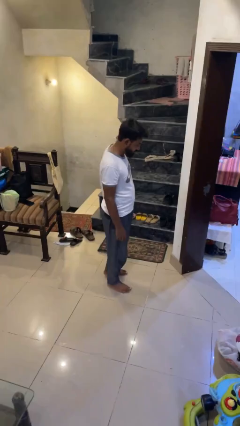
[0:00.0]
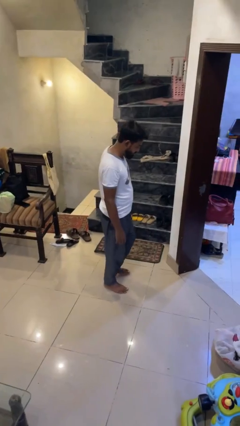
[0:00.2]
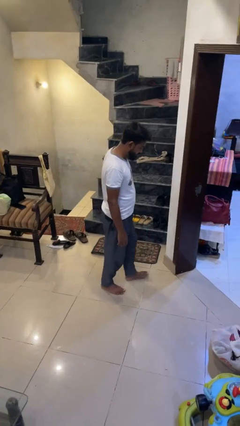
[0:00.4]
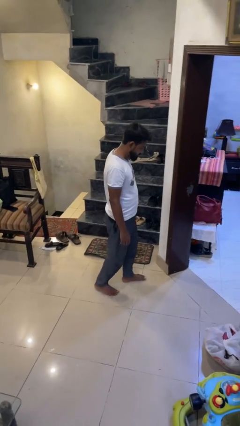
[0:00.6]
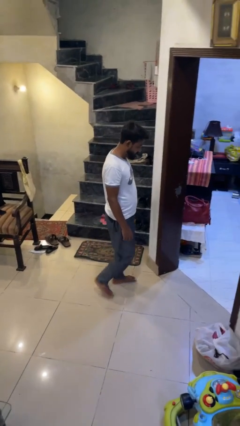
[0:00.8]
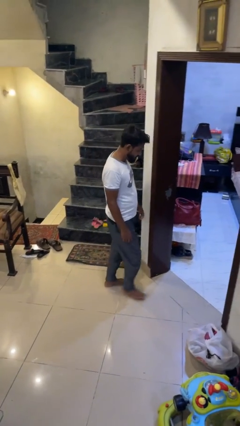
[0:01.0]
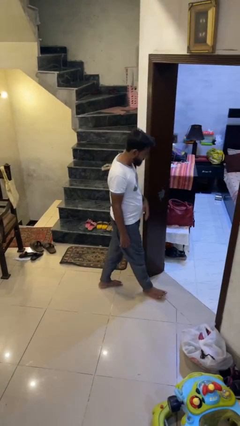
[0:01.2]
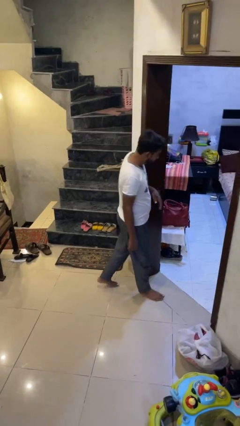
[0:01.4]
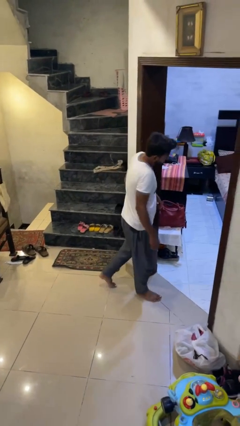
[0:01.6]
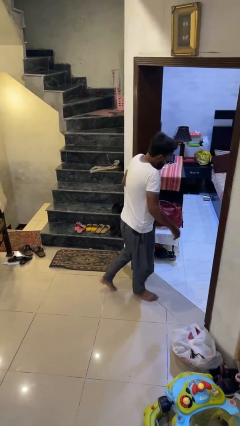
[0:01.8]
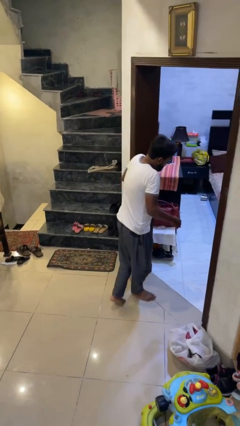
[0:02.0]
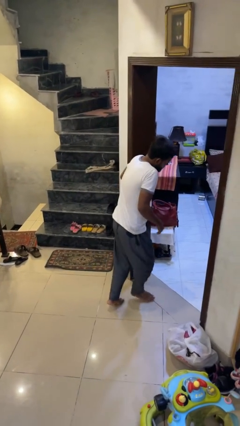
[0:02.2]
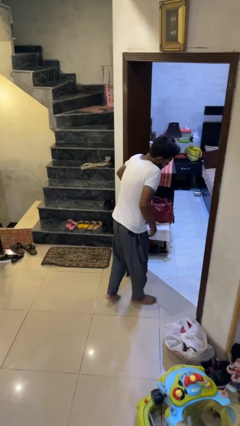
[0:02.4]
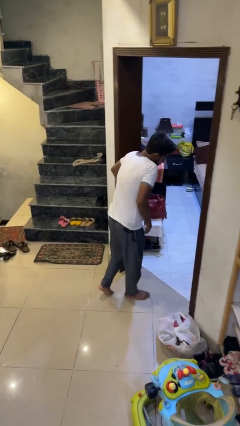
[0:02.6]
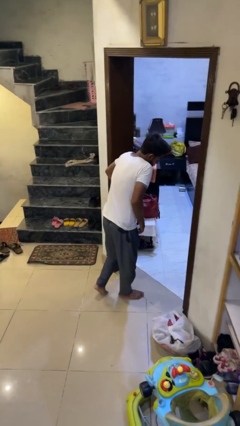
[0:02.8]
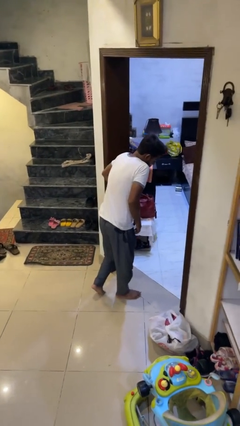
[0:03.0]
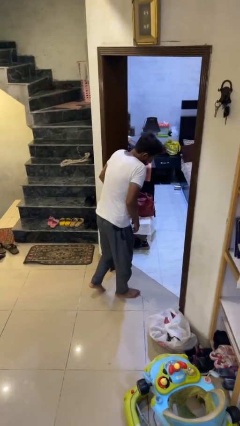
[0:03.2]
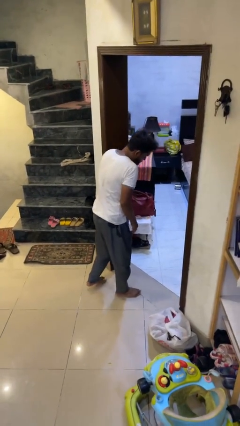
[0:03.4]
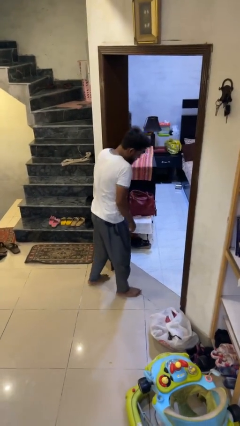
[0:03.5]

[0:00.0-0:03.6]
person bumps into wall

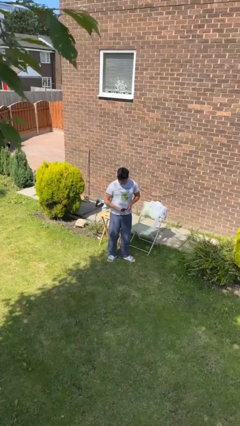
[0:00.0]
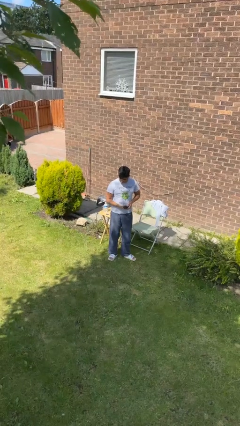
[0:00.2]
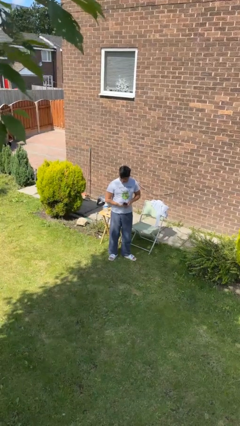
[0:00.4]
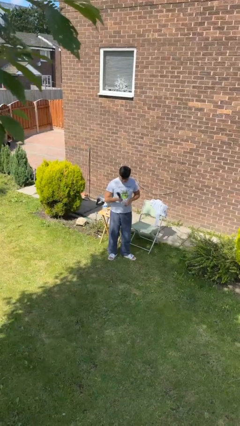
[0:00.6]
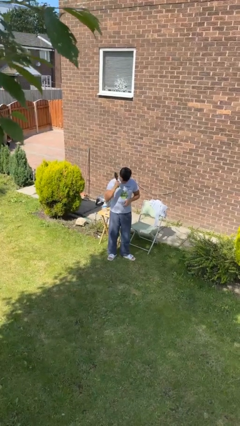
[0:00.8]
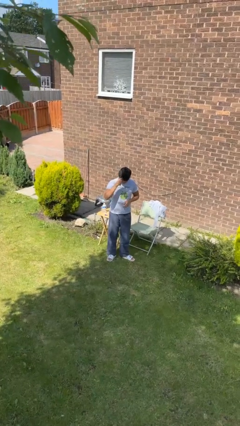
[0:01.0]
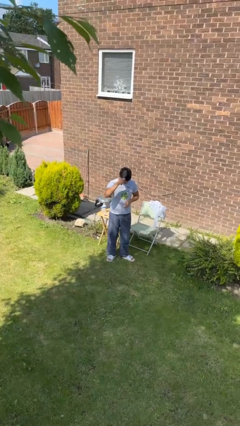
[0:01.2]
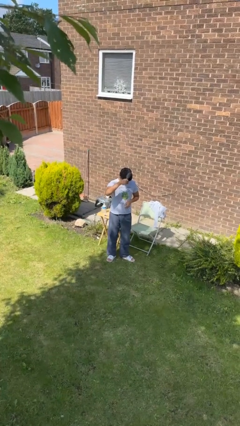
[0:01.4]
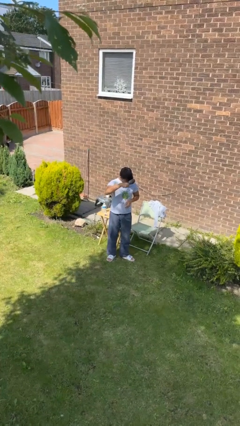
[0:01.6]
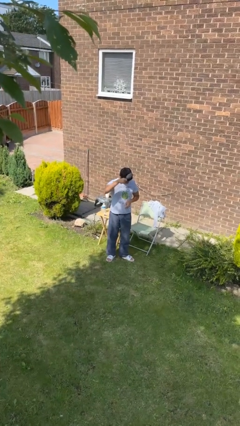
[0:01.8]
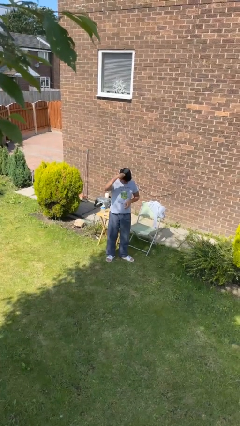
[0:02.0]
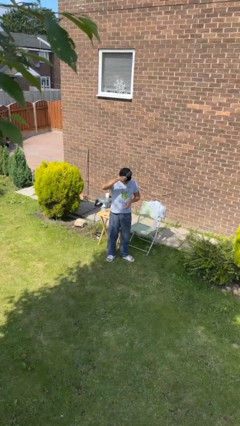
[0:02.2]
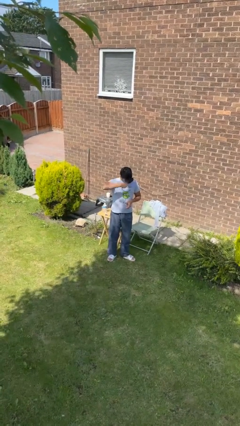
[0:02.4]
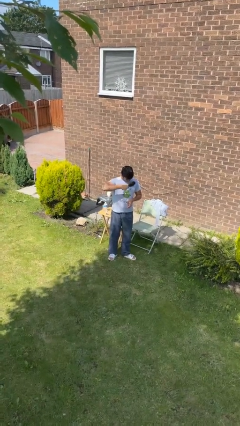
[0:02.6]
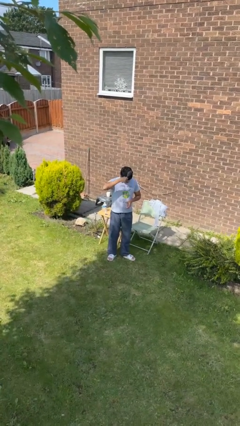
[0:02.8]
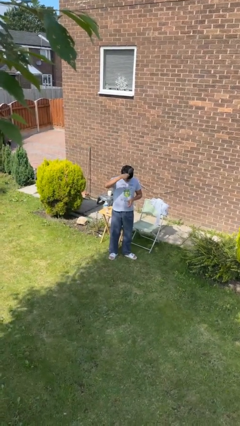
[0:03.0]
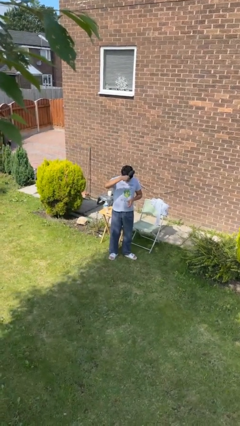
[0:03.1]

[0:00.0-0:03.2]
person brushes hair

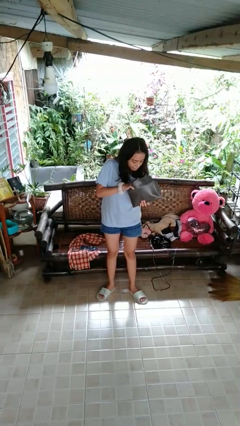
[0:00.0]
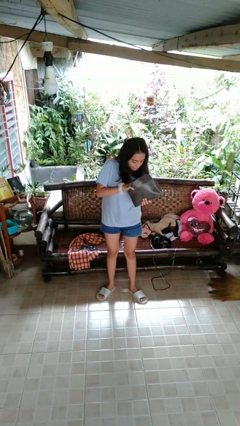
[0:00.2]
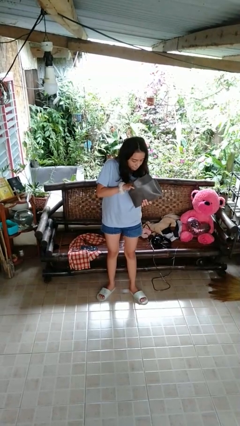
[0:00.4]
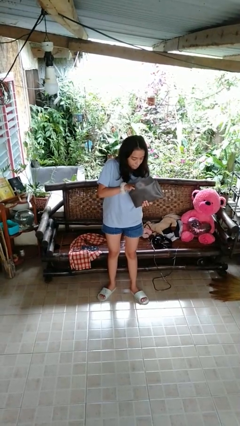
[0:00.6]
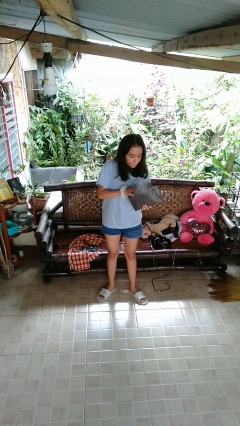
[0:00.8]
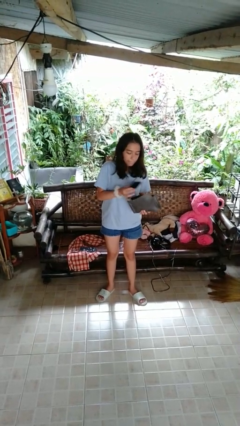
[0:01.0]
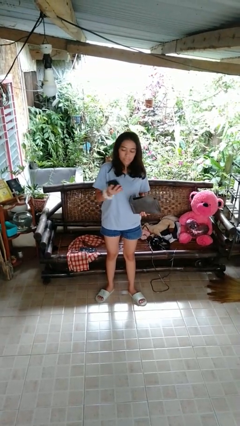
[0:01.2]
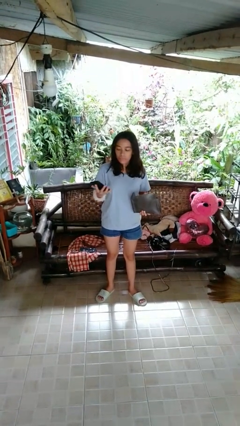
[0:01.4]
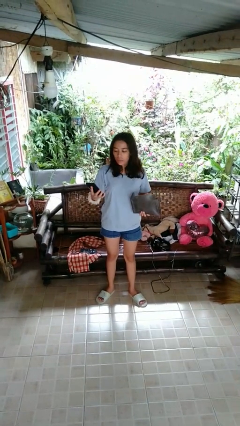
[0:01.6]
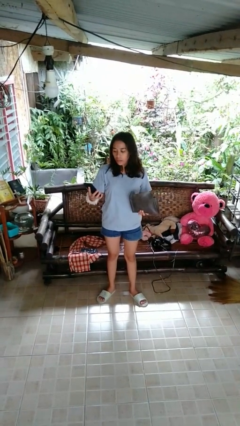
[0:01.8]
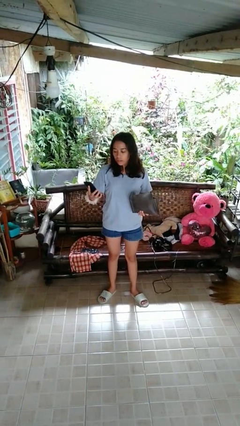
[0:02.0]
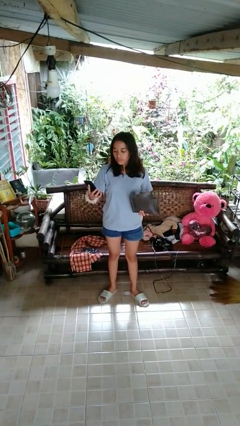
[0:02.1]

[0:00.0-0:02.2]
person takes object from purse

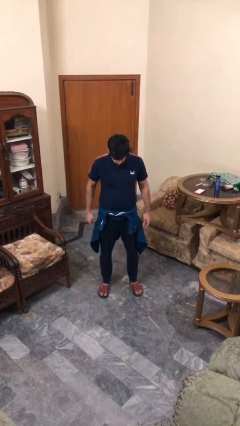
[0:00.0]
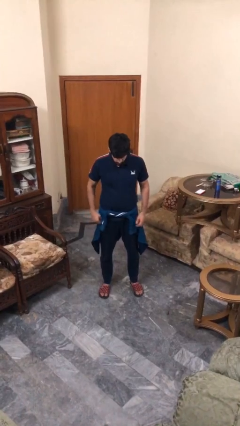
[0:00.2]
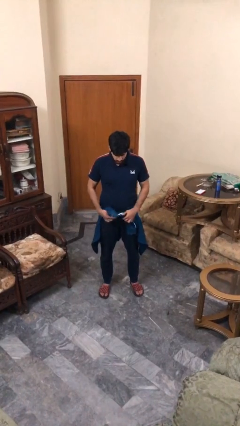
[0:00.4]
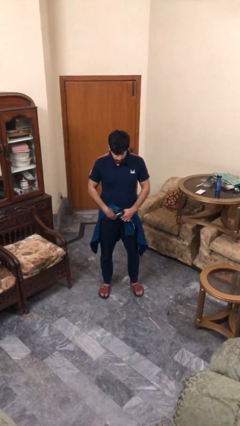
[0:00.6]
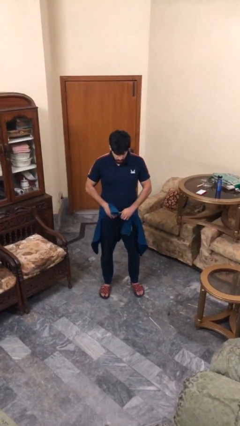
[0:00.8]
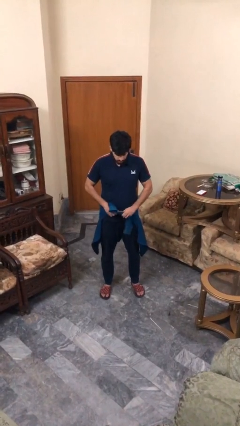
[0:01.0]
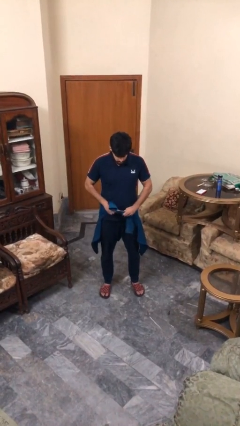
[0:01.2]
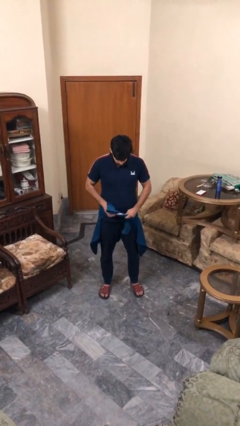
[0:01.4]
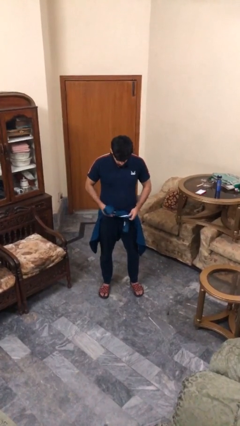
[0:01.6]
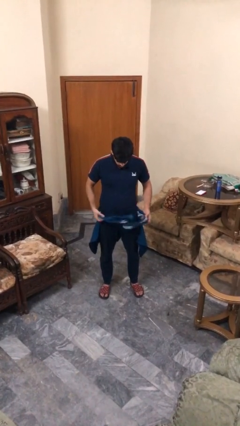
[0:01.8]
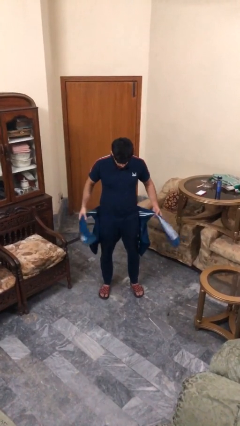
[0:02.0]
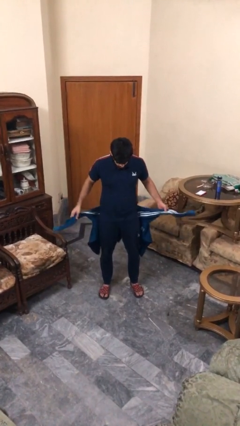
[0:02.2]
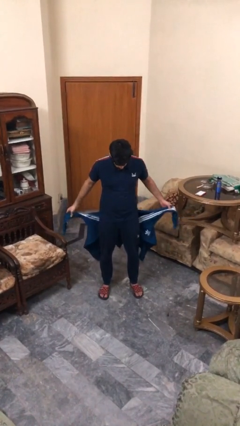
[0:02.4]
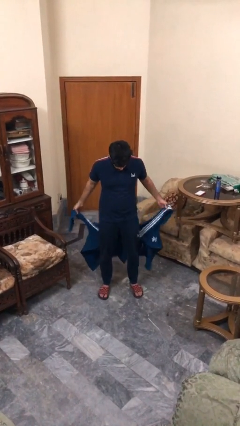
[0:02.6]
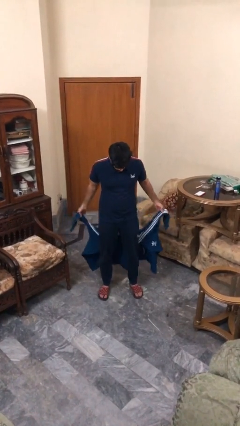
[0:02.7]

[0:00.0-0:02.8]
person unties jacket around waist

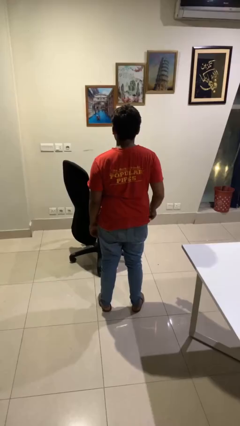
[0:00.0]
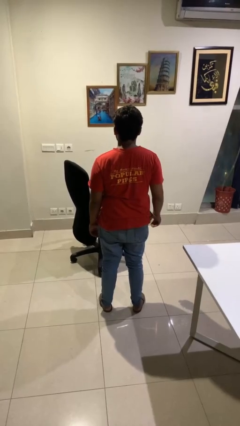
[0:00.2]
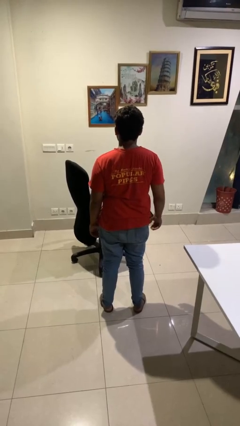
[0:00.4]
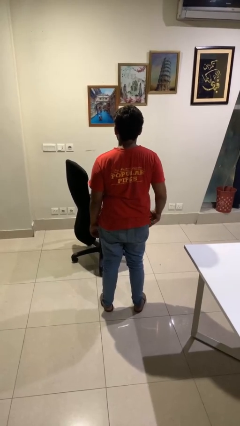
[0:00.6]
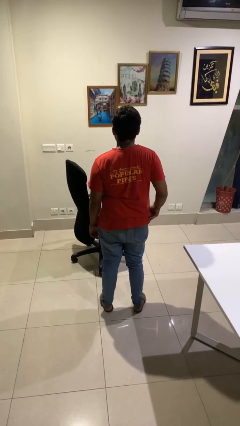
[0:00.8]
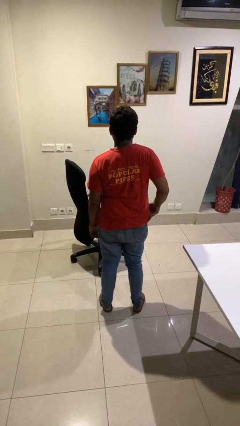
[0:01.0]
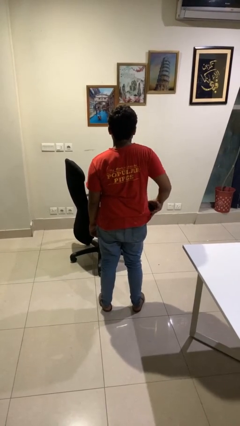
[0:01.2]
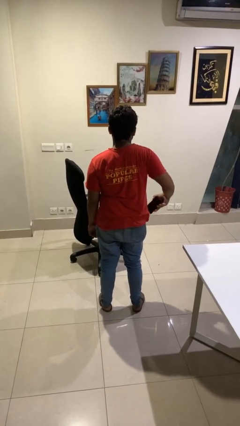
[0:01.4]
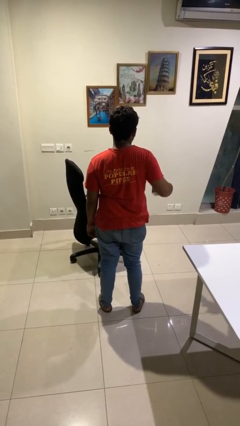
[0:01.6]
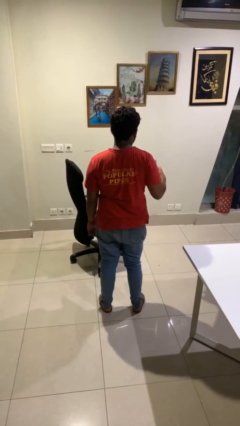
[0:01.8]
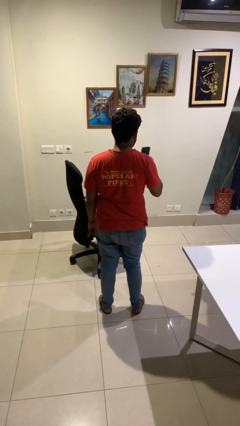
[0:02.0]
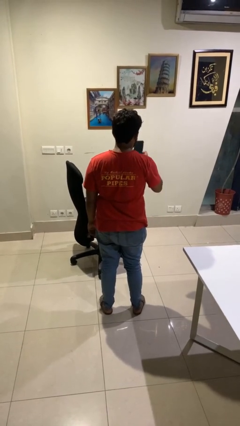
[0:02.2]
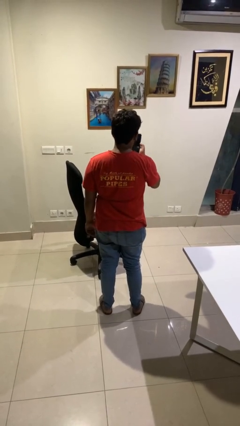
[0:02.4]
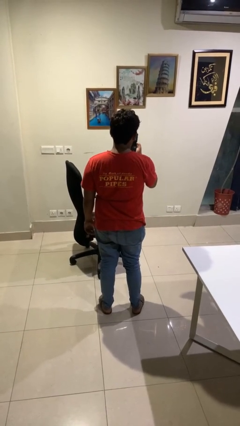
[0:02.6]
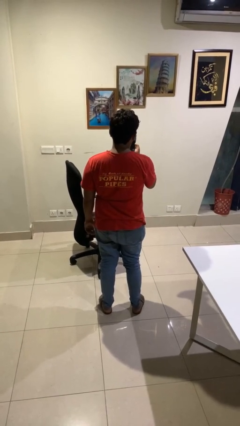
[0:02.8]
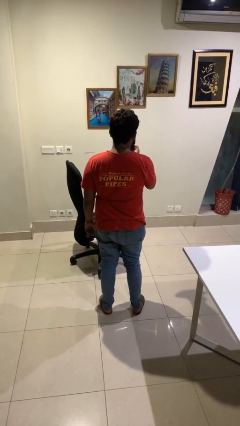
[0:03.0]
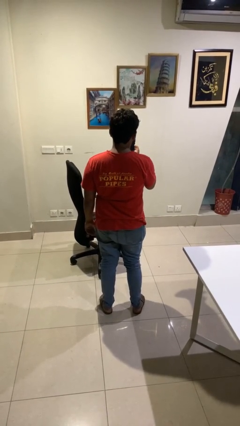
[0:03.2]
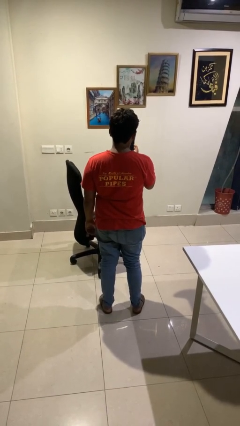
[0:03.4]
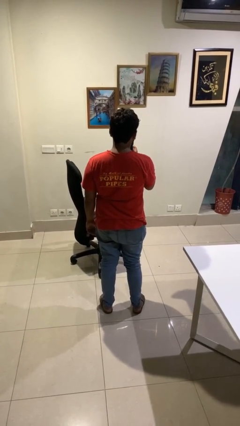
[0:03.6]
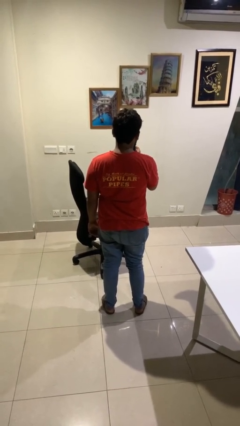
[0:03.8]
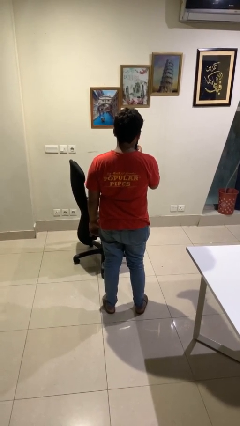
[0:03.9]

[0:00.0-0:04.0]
person takes phone from pocket

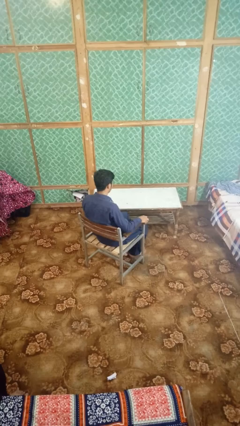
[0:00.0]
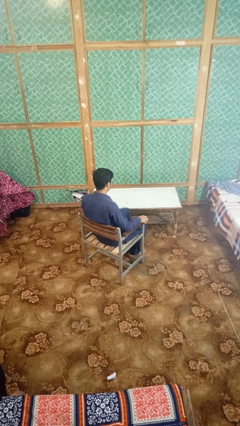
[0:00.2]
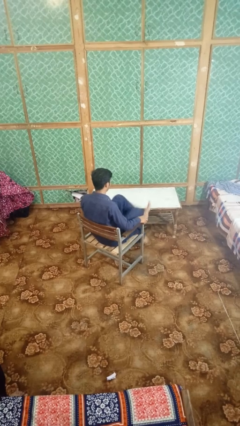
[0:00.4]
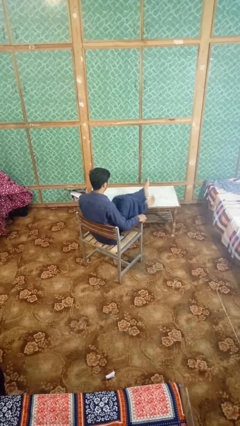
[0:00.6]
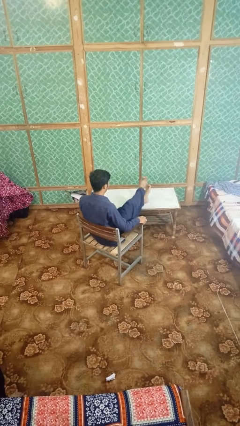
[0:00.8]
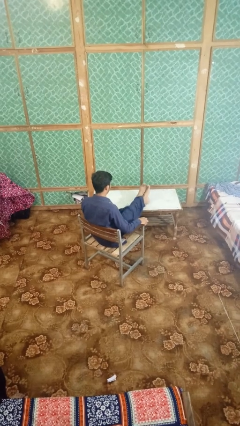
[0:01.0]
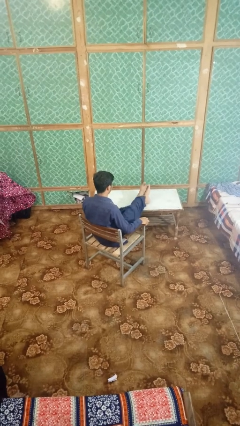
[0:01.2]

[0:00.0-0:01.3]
person puts feet up

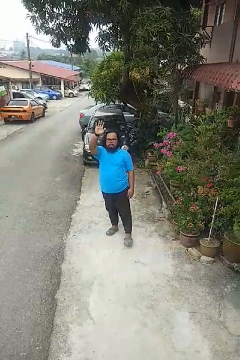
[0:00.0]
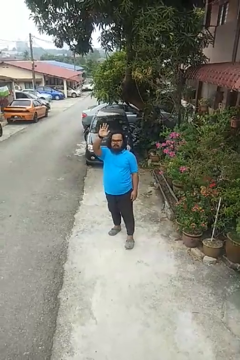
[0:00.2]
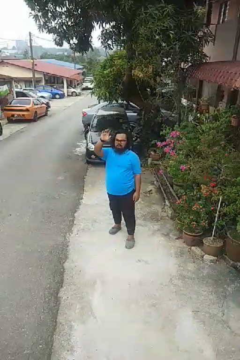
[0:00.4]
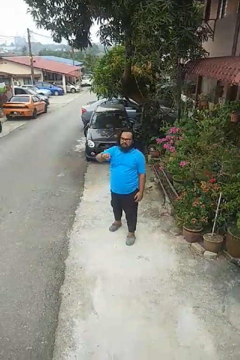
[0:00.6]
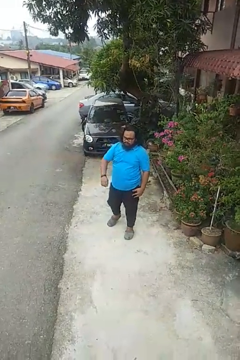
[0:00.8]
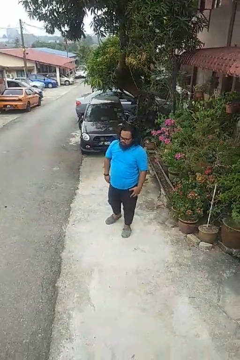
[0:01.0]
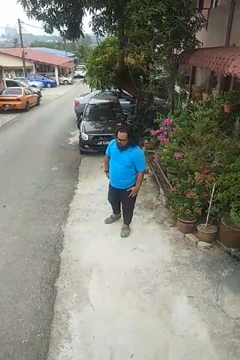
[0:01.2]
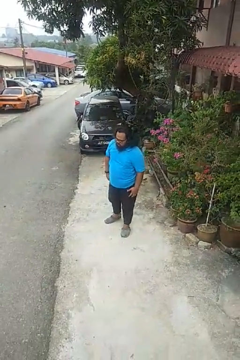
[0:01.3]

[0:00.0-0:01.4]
person gestures lower hand
